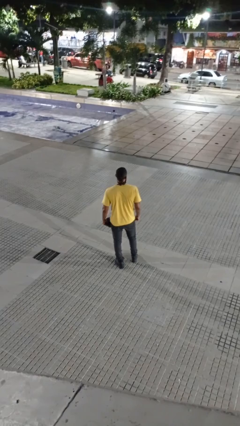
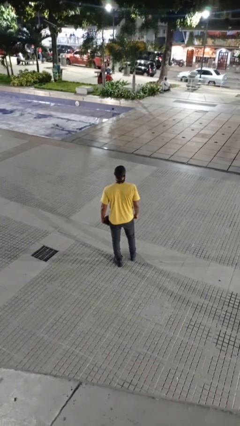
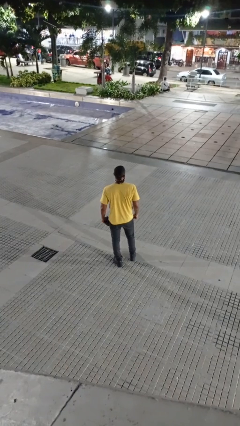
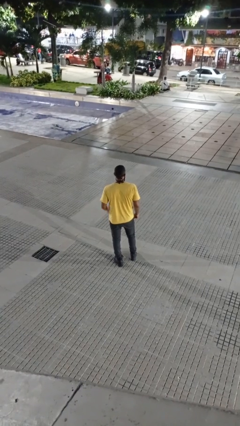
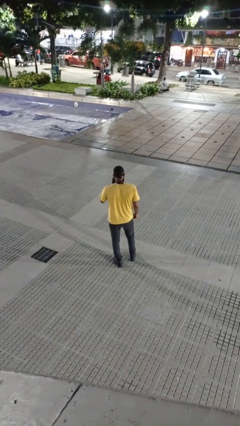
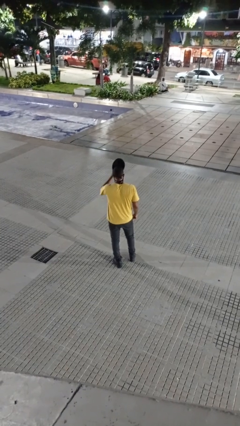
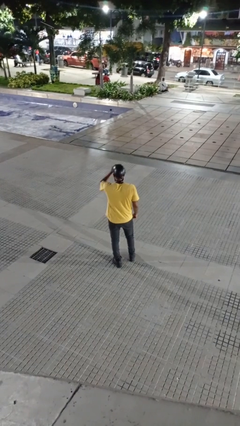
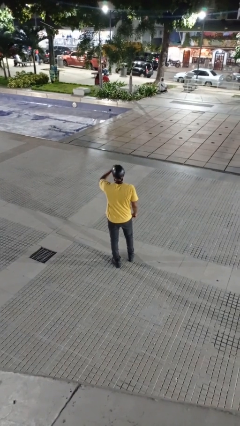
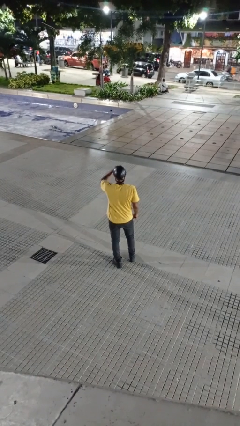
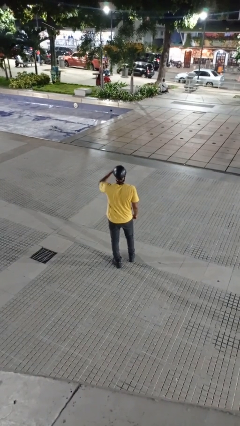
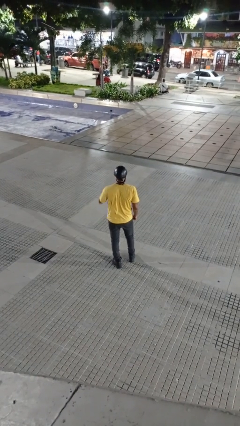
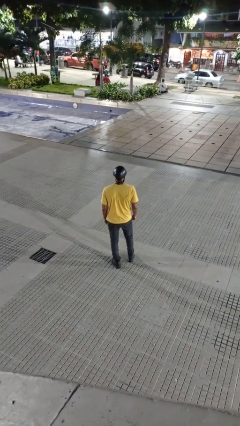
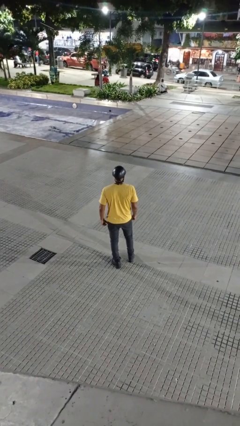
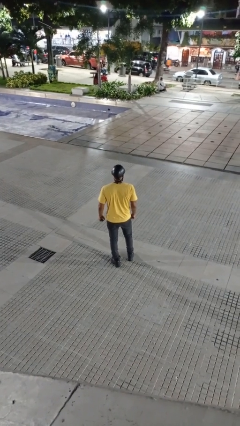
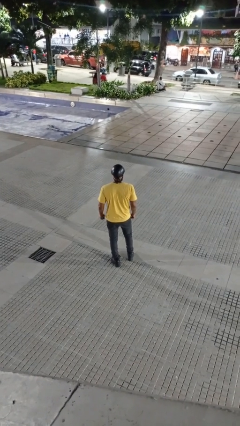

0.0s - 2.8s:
person puts on hat

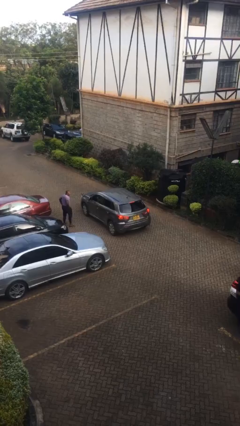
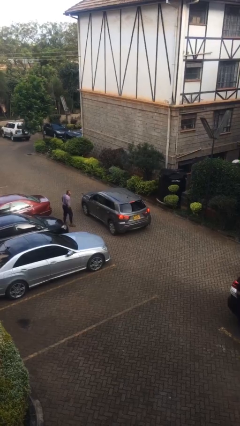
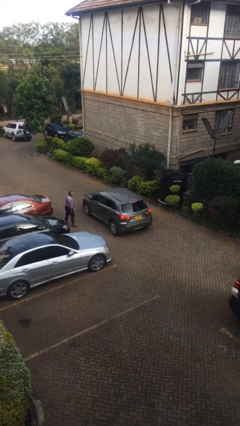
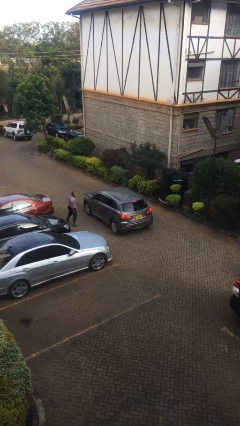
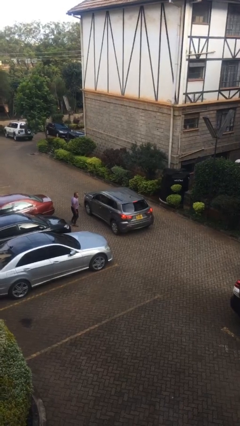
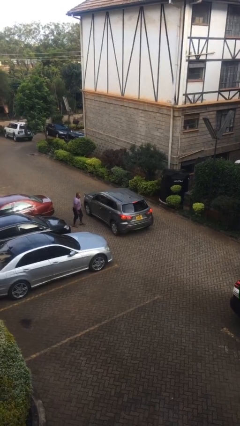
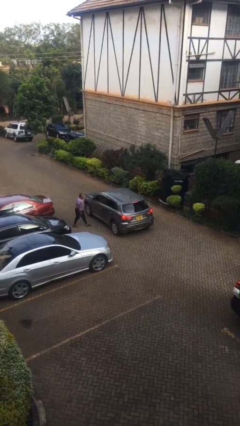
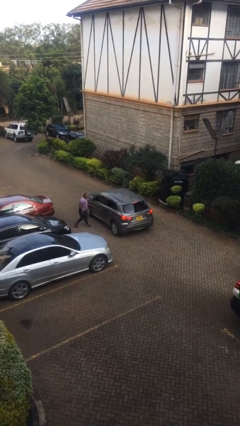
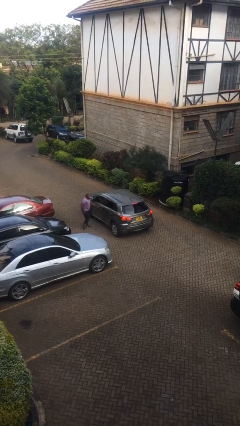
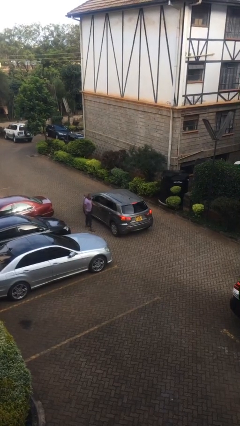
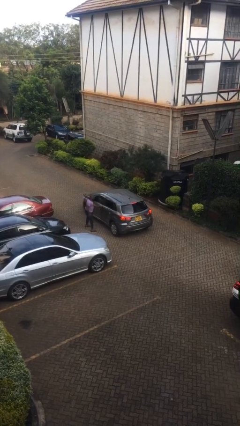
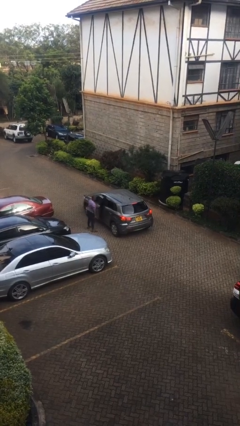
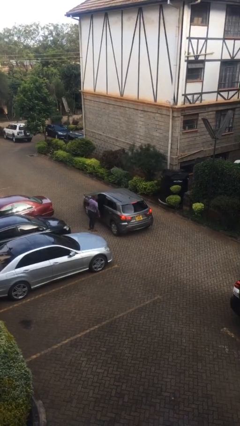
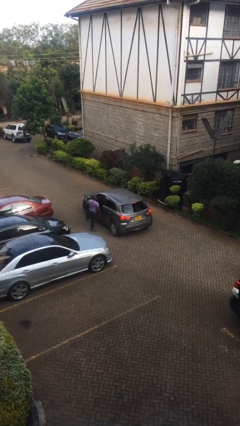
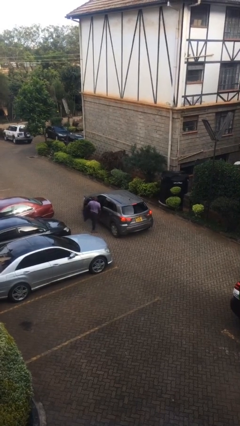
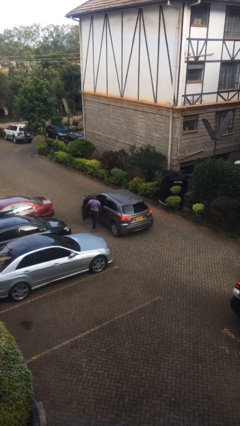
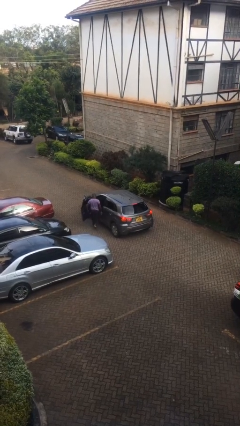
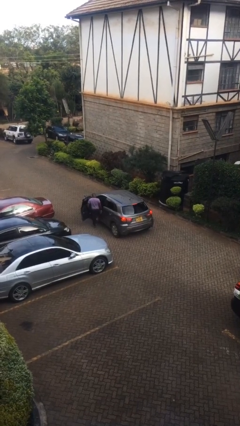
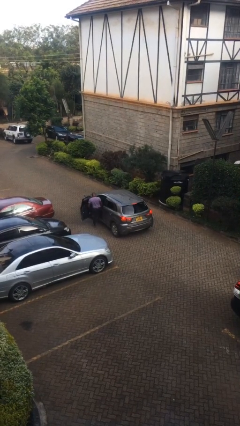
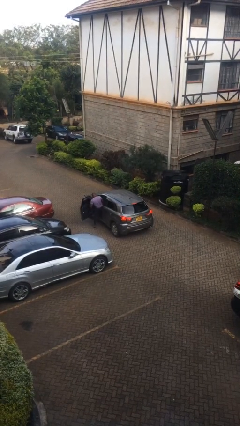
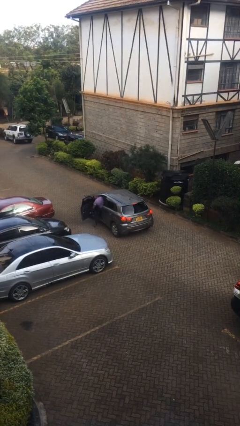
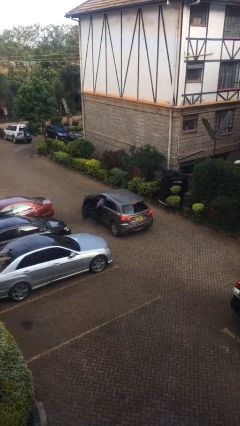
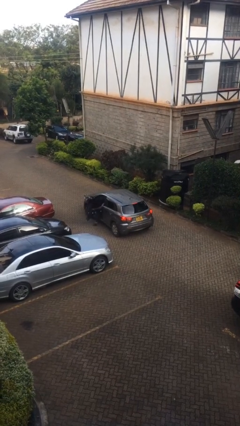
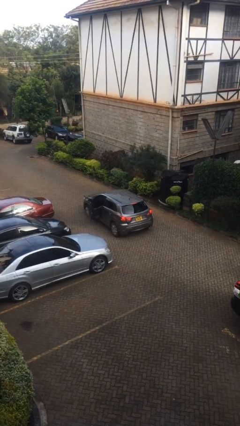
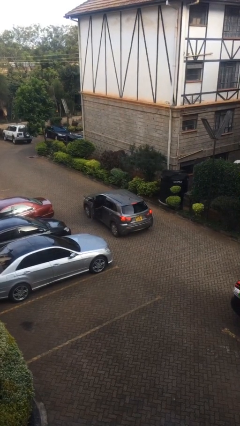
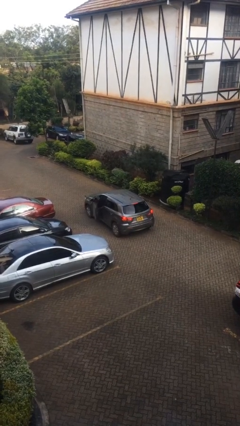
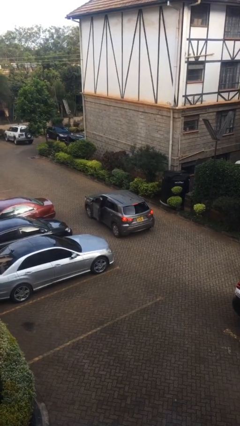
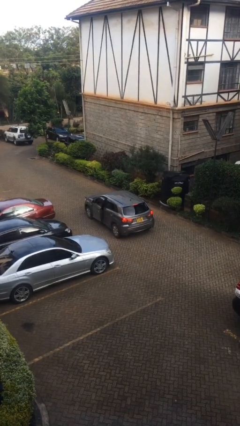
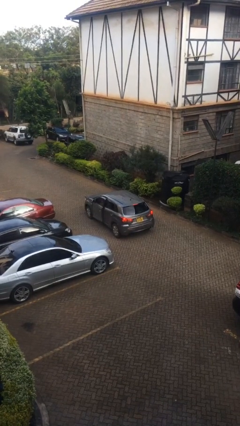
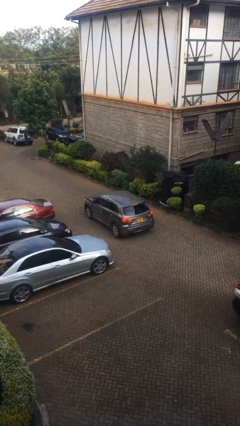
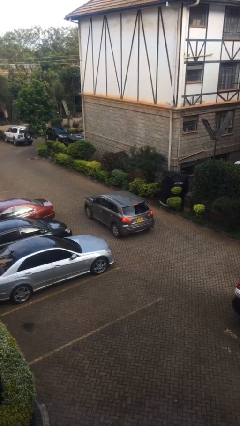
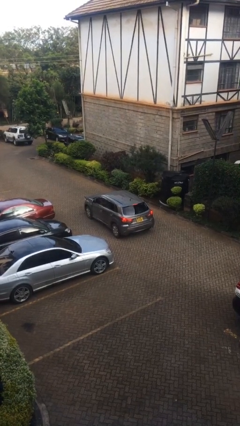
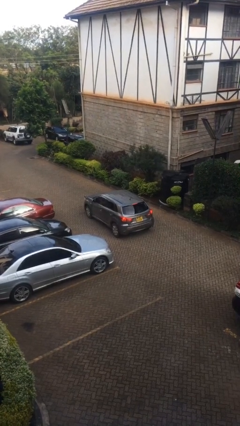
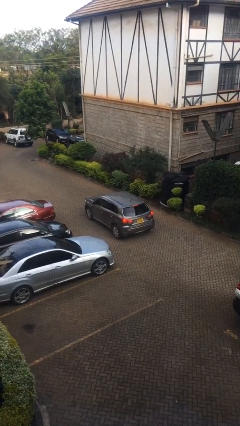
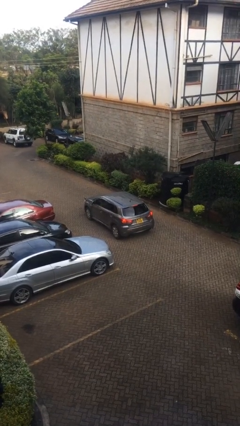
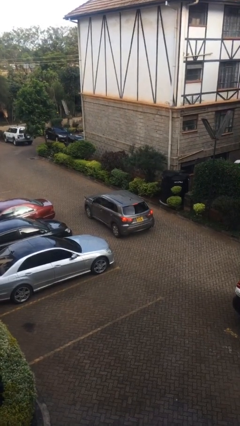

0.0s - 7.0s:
car picks up person

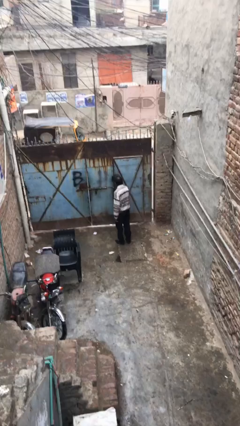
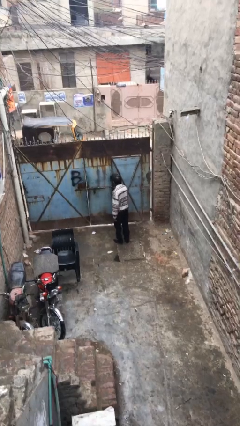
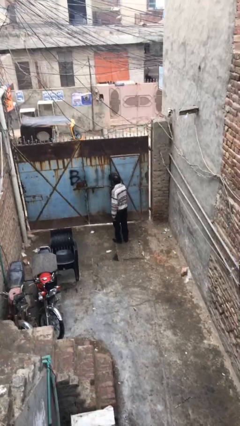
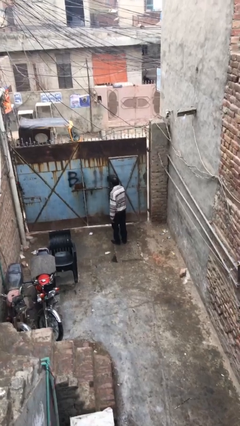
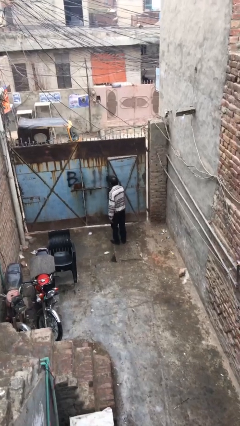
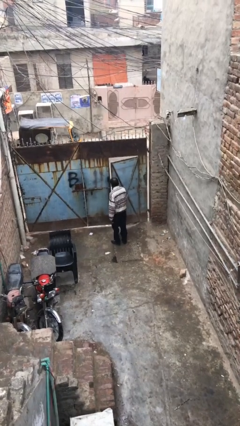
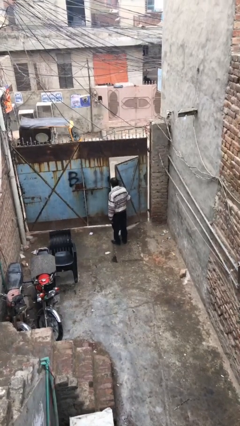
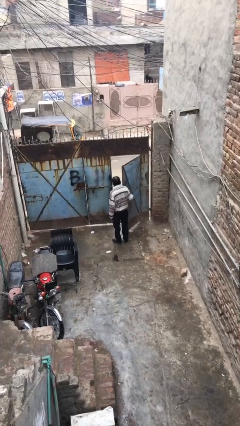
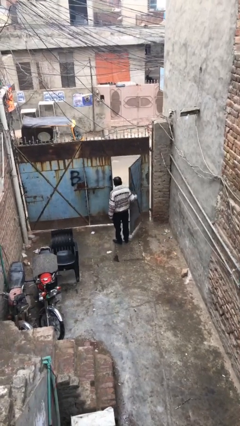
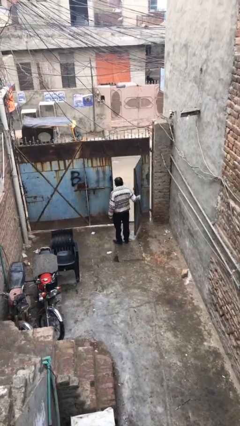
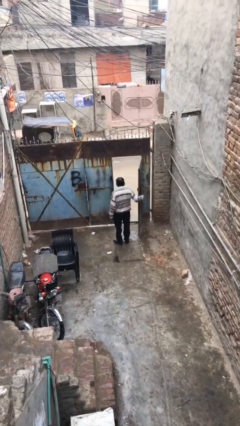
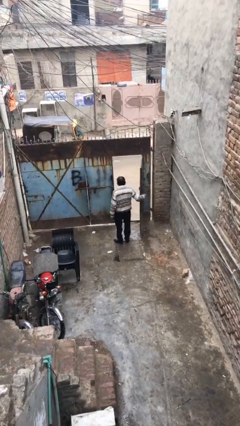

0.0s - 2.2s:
person opens facility door

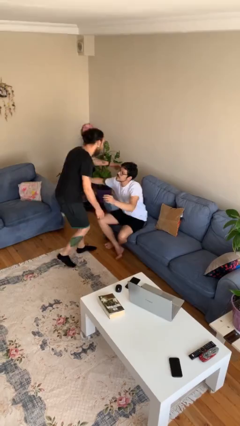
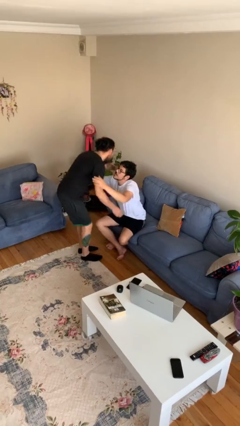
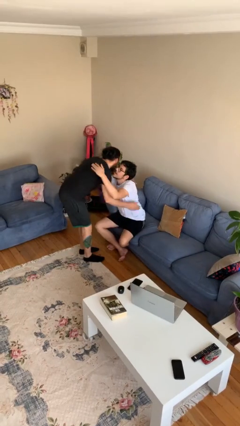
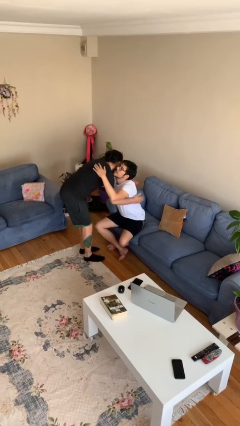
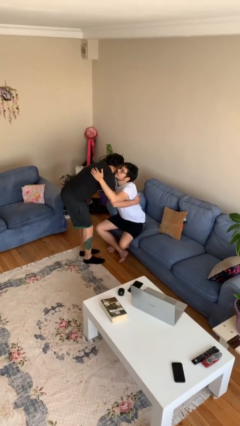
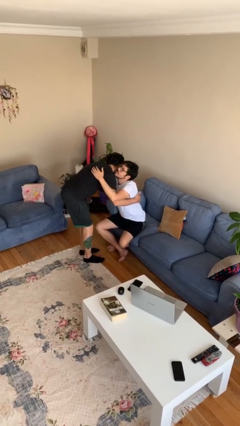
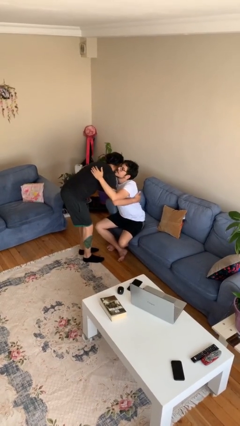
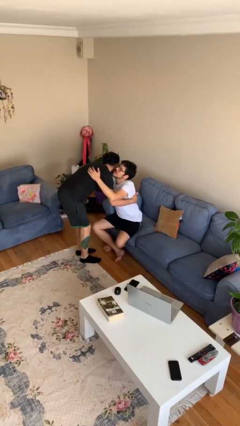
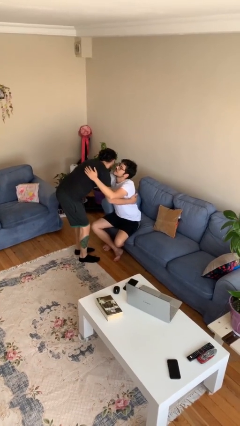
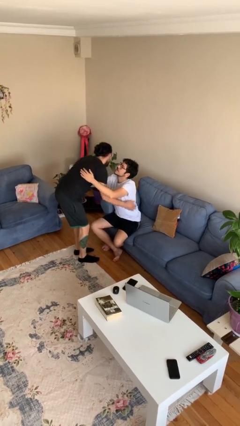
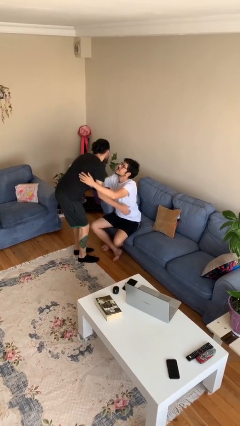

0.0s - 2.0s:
person embraces person

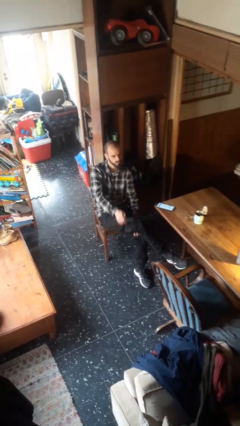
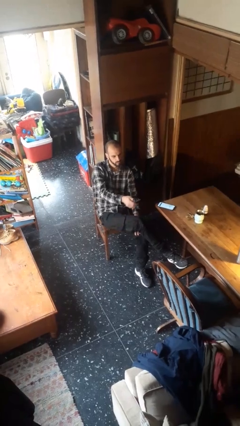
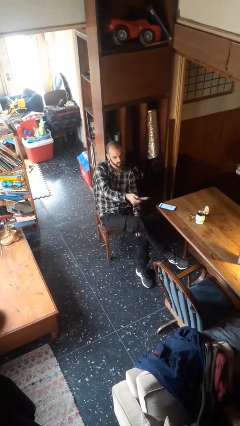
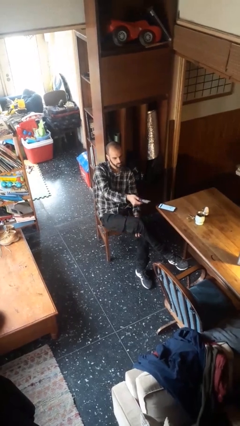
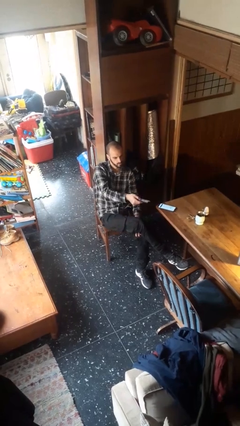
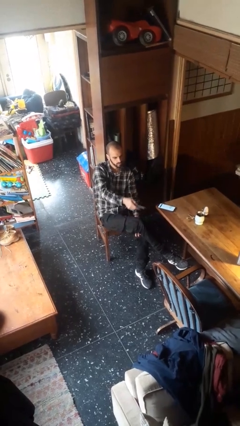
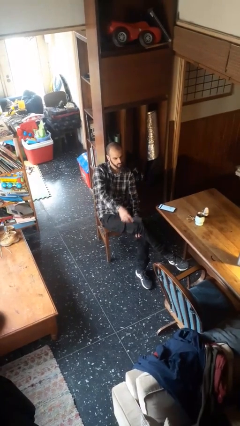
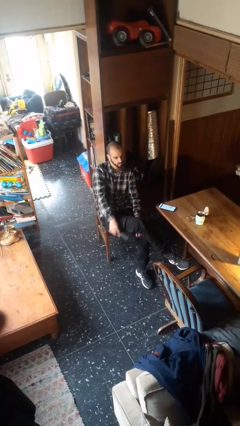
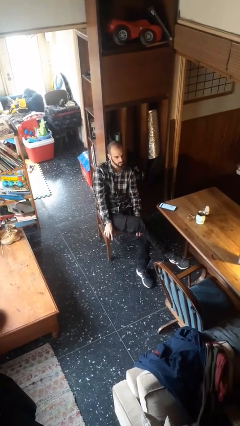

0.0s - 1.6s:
person uses television remote

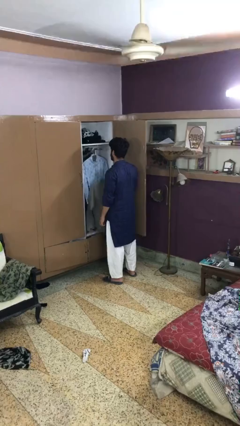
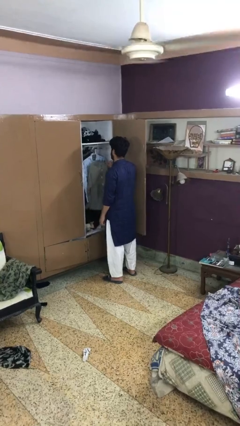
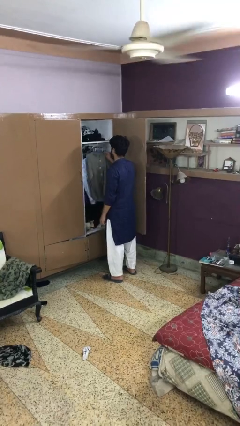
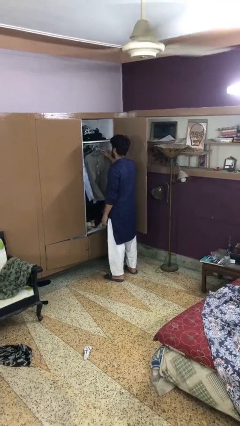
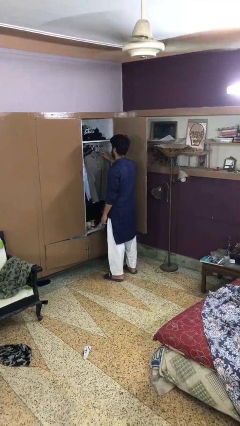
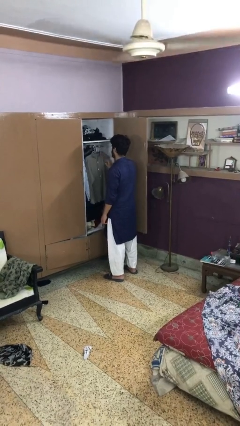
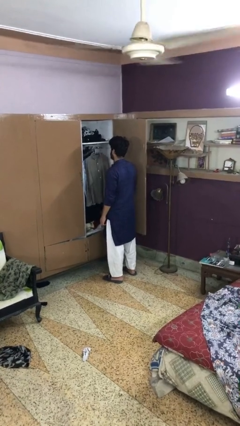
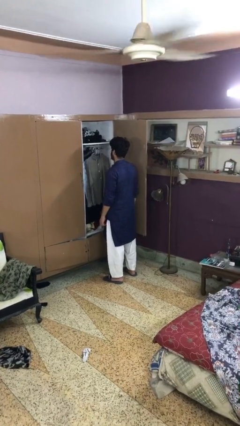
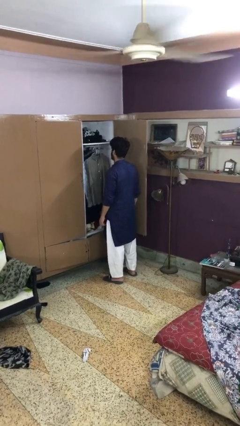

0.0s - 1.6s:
person puts clothes into closet
